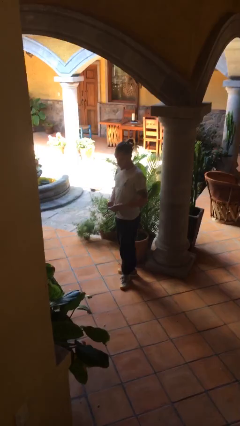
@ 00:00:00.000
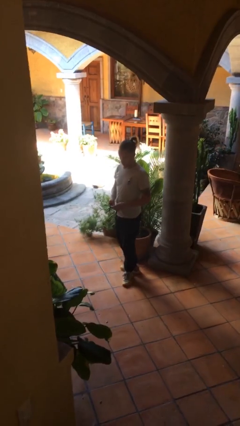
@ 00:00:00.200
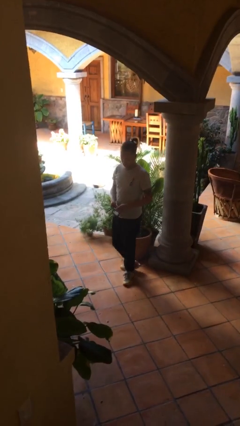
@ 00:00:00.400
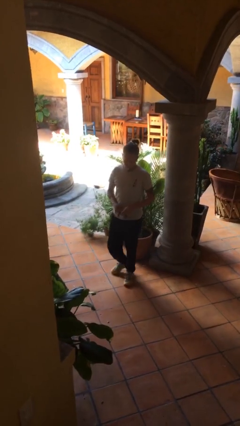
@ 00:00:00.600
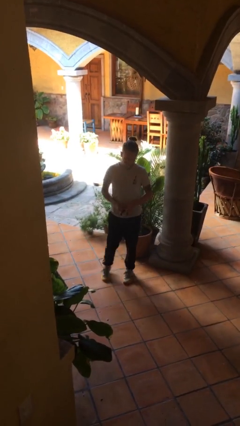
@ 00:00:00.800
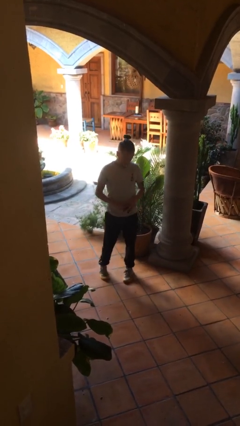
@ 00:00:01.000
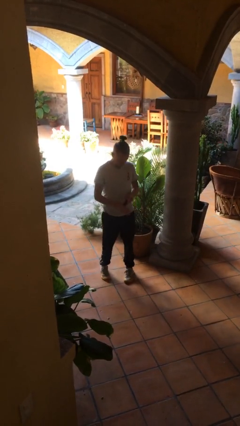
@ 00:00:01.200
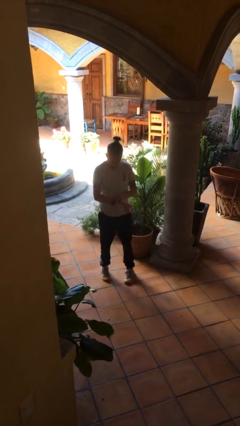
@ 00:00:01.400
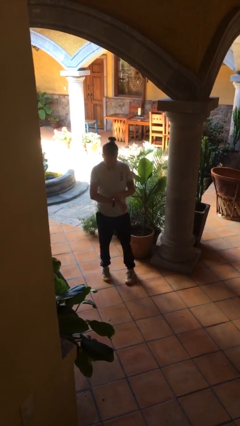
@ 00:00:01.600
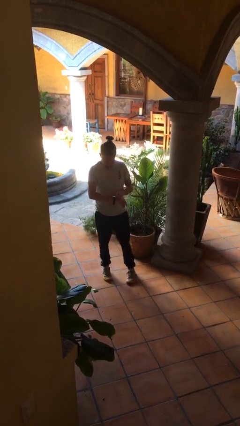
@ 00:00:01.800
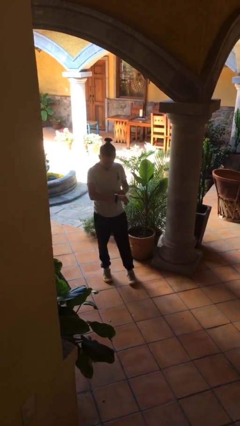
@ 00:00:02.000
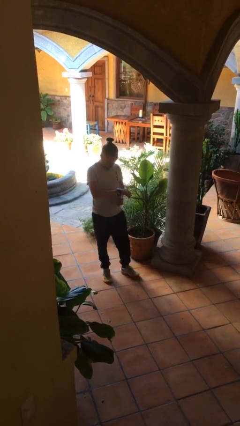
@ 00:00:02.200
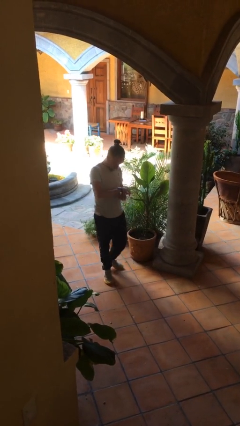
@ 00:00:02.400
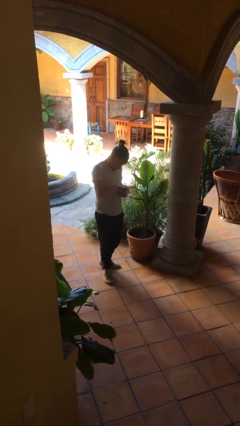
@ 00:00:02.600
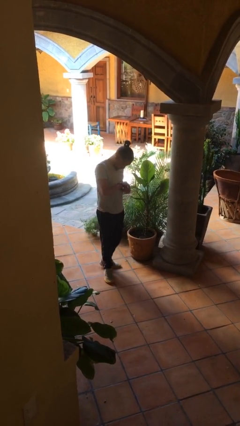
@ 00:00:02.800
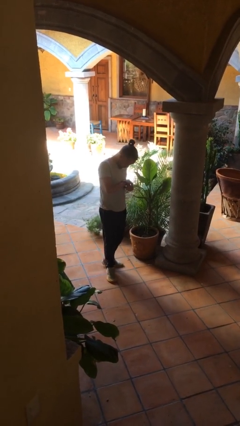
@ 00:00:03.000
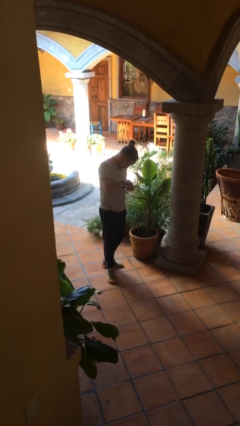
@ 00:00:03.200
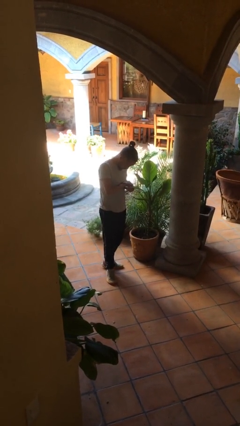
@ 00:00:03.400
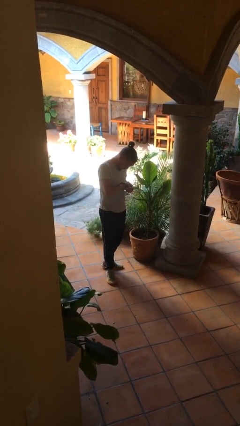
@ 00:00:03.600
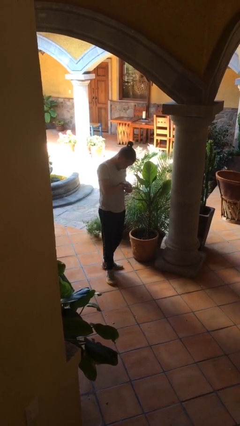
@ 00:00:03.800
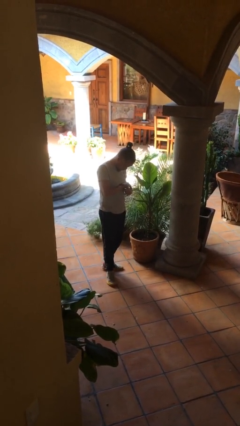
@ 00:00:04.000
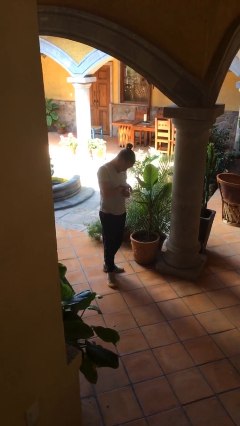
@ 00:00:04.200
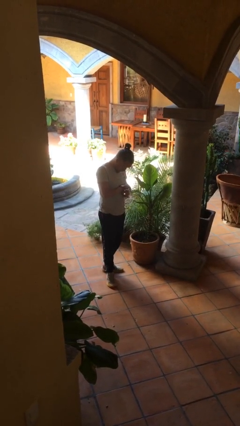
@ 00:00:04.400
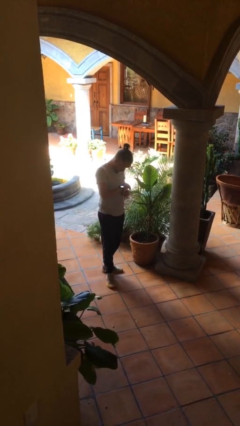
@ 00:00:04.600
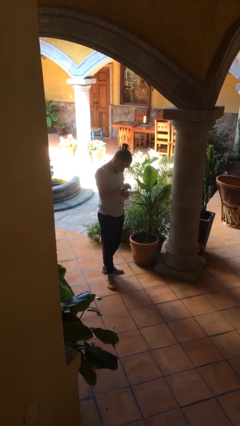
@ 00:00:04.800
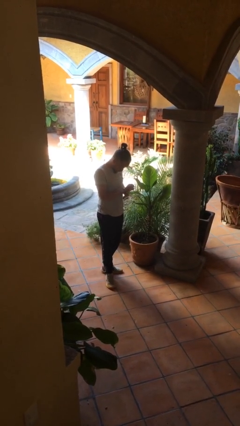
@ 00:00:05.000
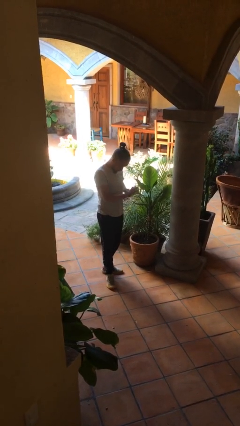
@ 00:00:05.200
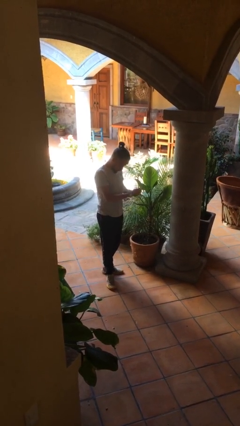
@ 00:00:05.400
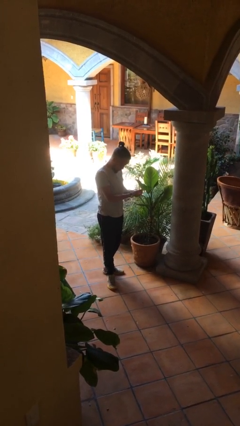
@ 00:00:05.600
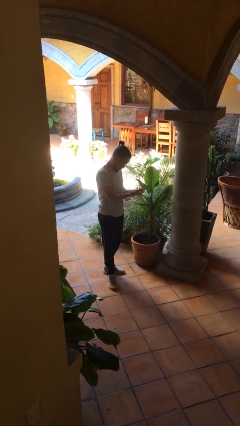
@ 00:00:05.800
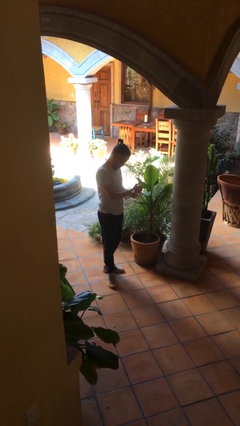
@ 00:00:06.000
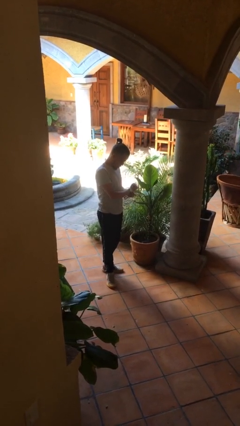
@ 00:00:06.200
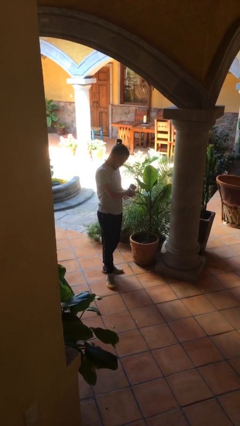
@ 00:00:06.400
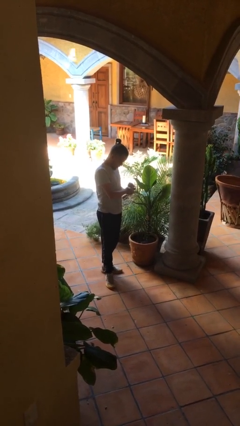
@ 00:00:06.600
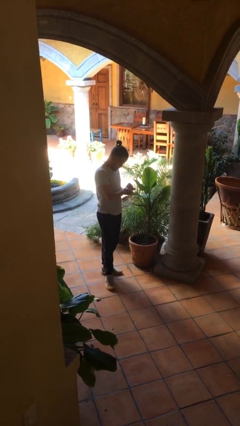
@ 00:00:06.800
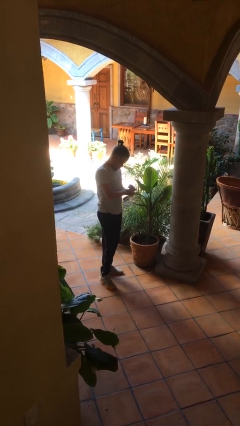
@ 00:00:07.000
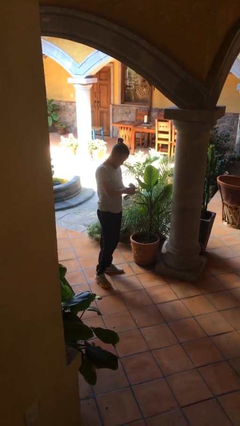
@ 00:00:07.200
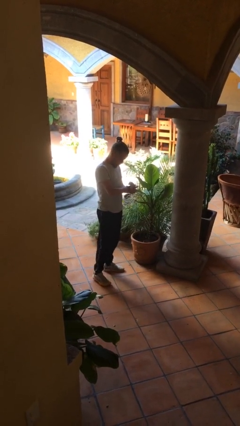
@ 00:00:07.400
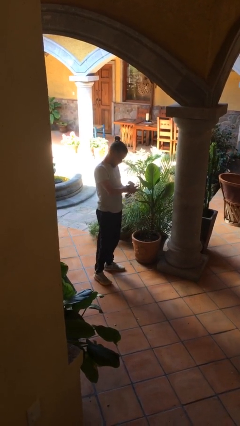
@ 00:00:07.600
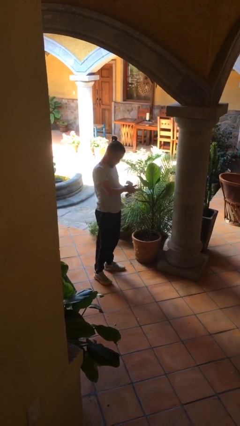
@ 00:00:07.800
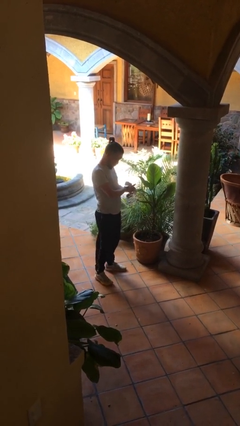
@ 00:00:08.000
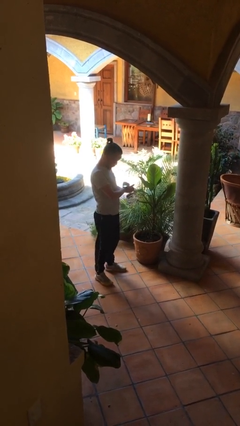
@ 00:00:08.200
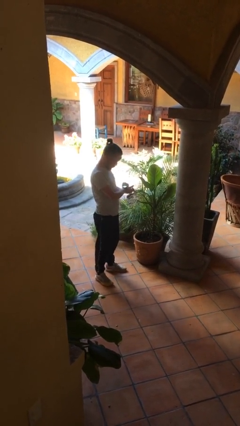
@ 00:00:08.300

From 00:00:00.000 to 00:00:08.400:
person puts on wristwatch

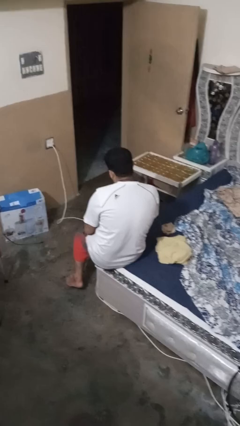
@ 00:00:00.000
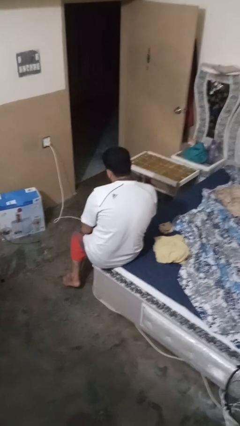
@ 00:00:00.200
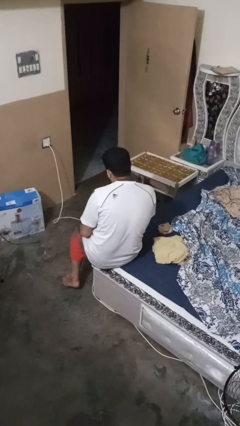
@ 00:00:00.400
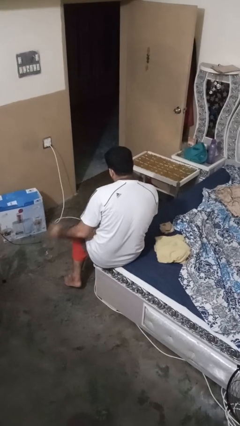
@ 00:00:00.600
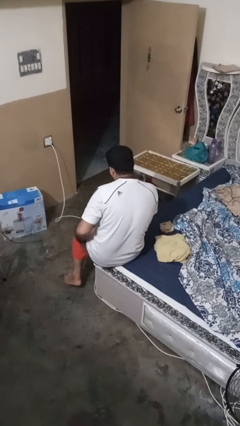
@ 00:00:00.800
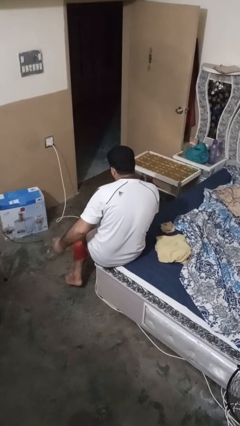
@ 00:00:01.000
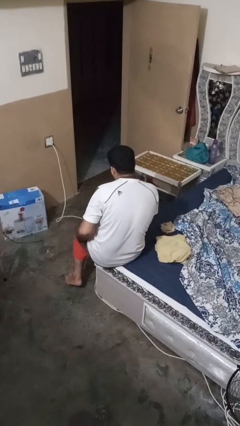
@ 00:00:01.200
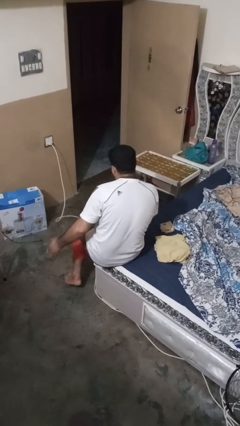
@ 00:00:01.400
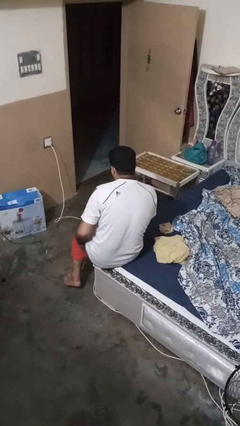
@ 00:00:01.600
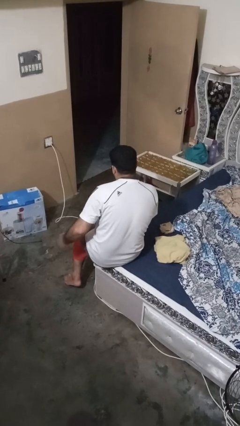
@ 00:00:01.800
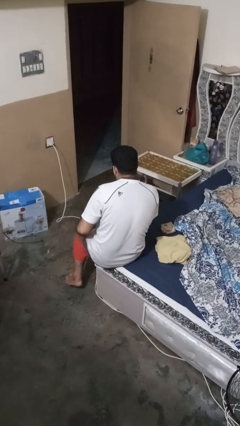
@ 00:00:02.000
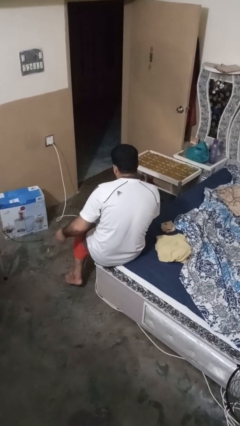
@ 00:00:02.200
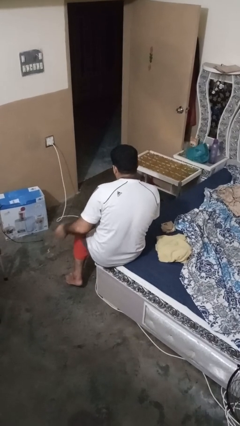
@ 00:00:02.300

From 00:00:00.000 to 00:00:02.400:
person slaps hands on thighs

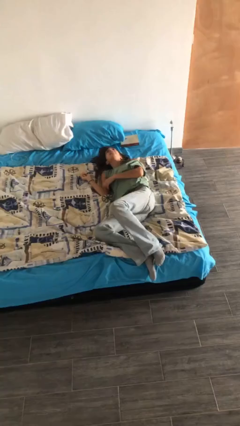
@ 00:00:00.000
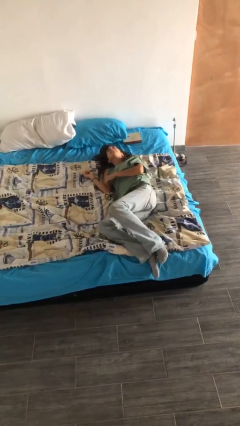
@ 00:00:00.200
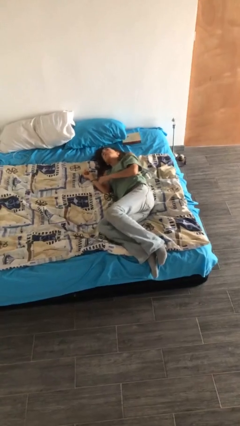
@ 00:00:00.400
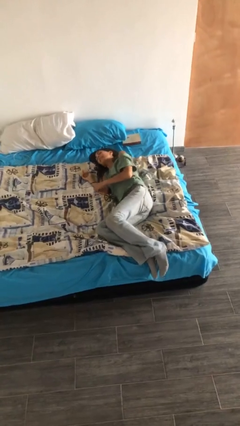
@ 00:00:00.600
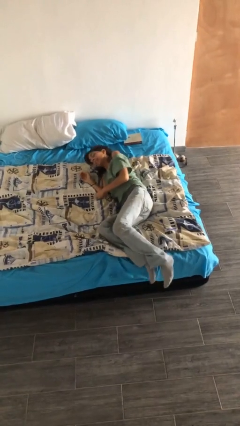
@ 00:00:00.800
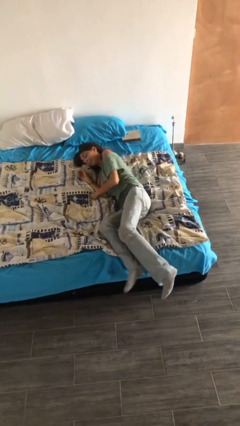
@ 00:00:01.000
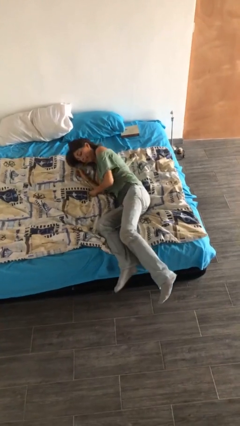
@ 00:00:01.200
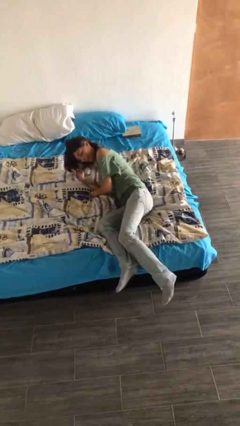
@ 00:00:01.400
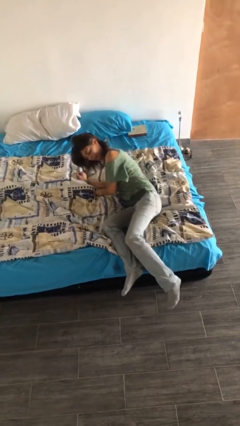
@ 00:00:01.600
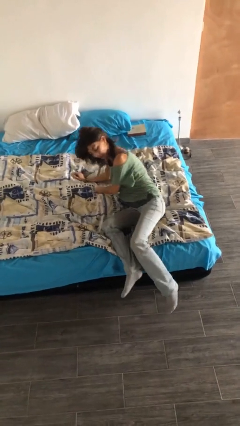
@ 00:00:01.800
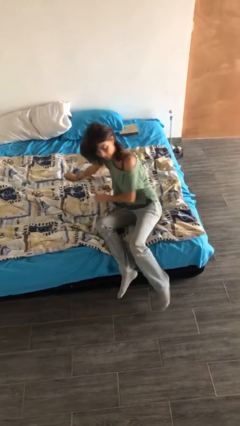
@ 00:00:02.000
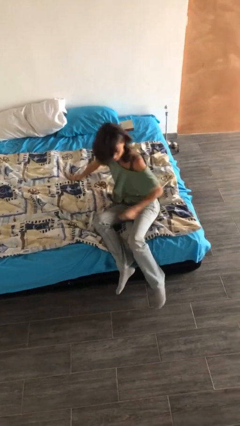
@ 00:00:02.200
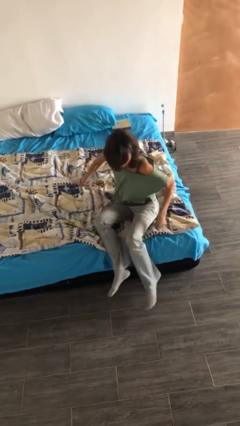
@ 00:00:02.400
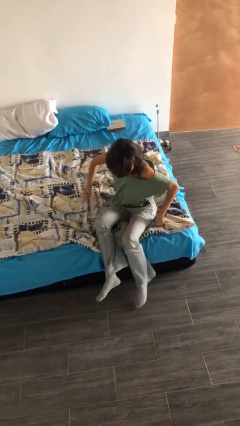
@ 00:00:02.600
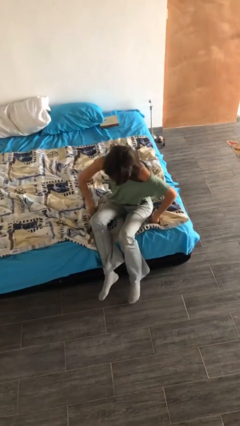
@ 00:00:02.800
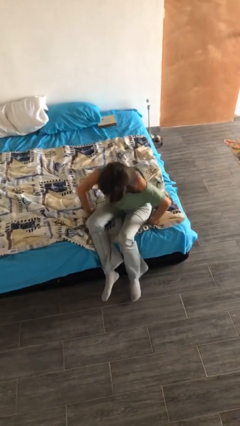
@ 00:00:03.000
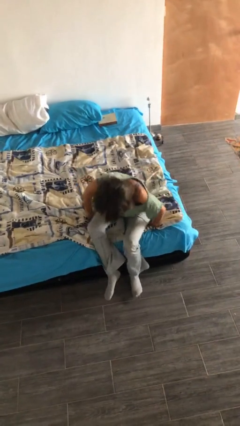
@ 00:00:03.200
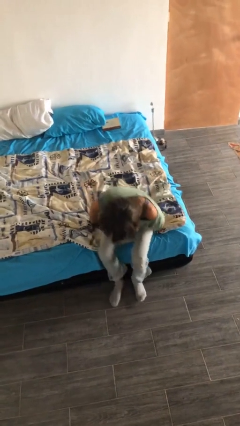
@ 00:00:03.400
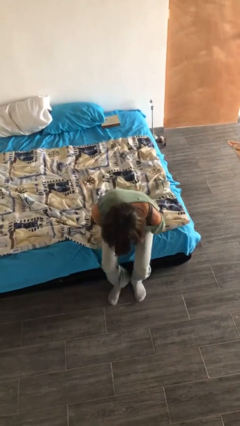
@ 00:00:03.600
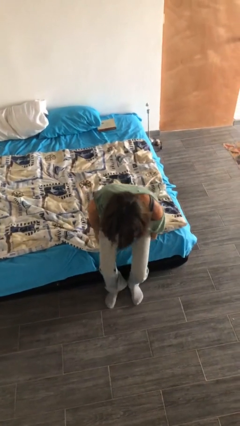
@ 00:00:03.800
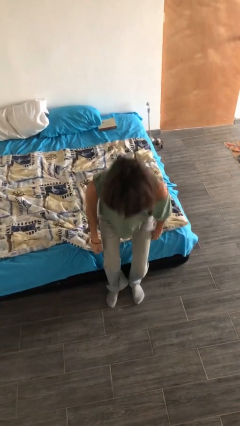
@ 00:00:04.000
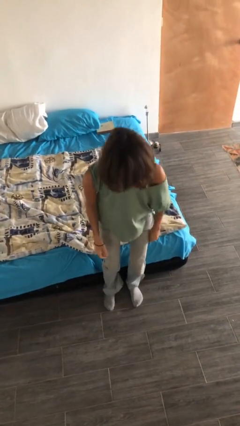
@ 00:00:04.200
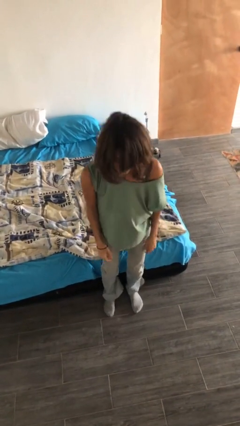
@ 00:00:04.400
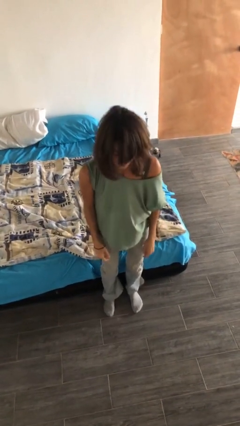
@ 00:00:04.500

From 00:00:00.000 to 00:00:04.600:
person stands up

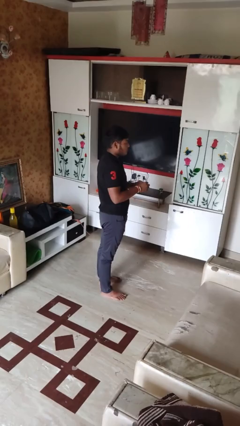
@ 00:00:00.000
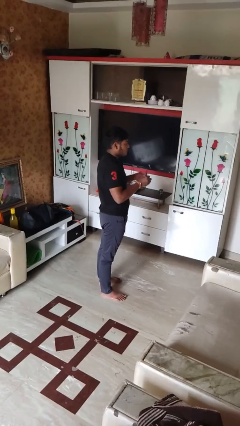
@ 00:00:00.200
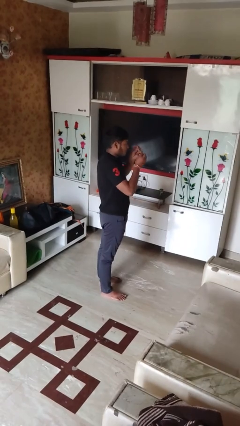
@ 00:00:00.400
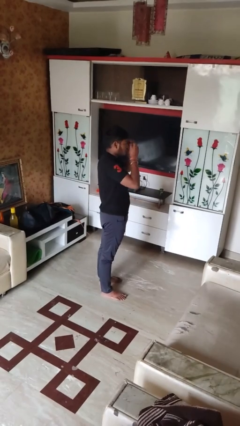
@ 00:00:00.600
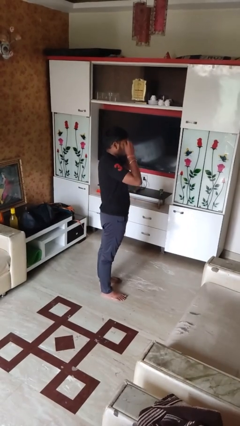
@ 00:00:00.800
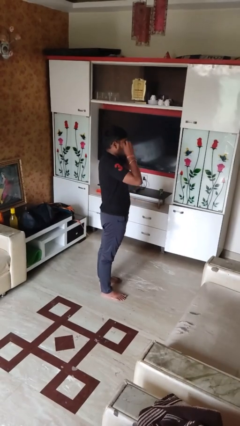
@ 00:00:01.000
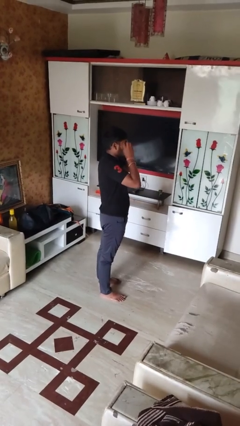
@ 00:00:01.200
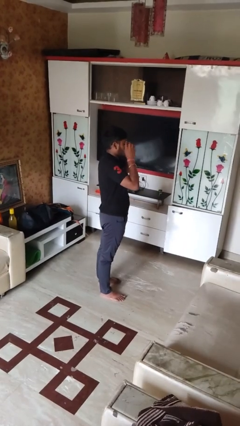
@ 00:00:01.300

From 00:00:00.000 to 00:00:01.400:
person puts on sunglasses

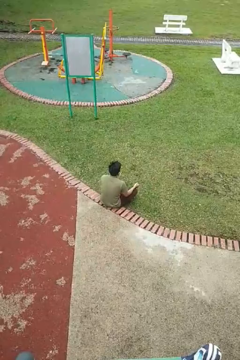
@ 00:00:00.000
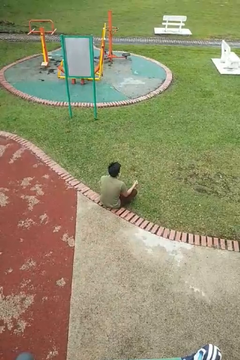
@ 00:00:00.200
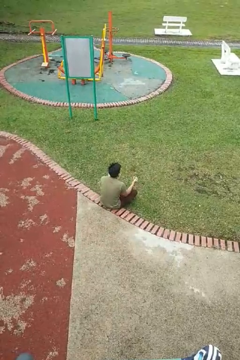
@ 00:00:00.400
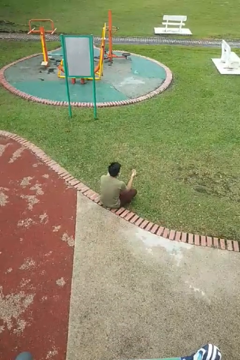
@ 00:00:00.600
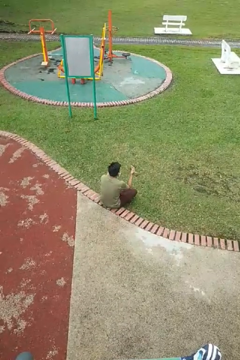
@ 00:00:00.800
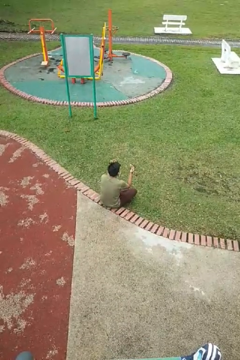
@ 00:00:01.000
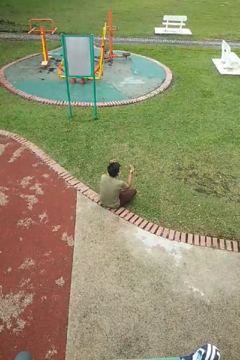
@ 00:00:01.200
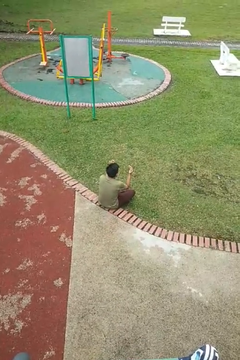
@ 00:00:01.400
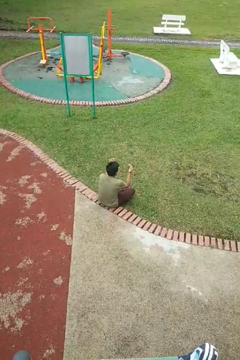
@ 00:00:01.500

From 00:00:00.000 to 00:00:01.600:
person prays
